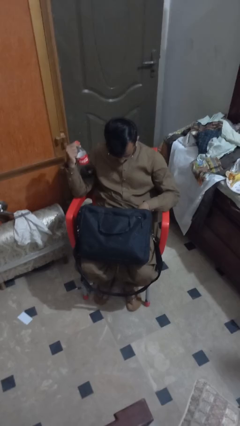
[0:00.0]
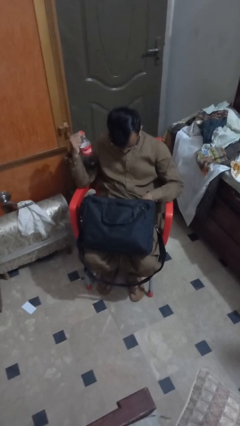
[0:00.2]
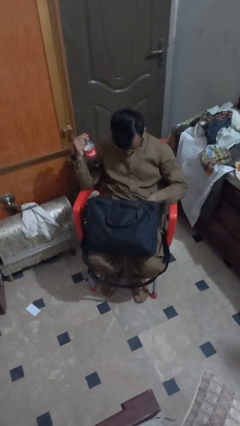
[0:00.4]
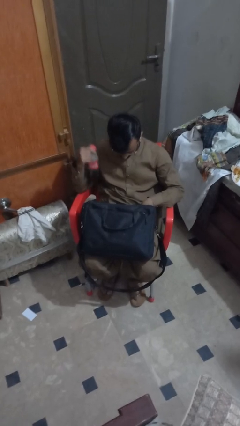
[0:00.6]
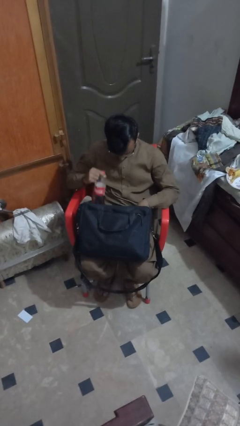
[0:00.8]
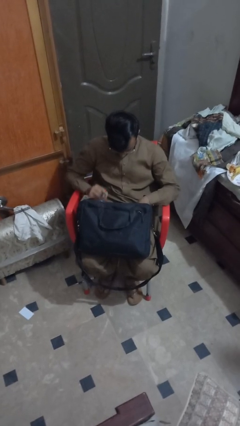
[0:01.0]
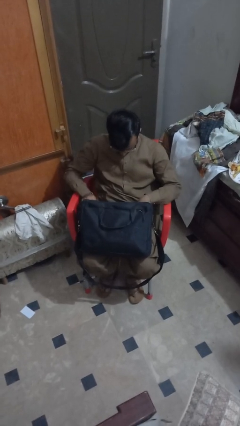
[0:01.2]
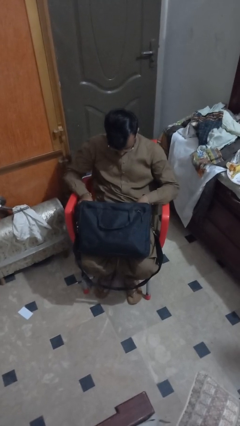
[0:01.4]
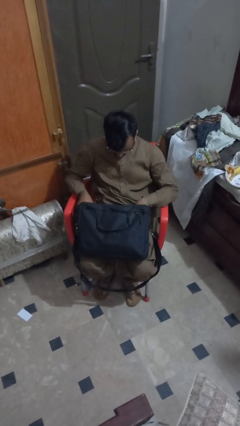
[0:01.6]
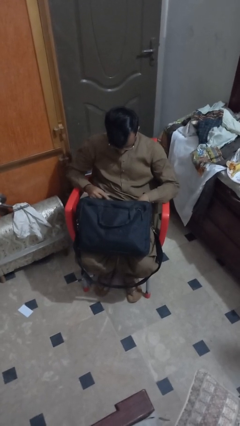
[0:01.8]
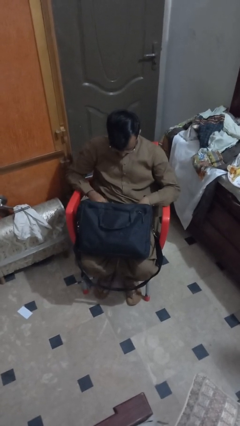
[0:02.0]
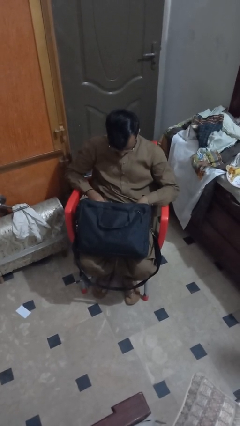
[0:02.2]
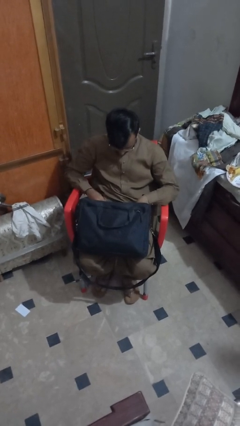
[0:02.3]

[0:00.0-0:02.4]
person puts object into bag

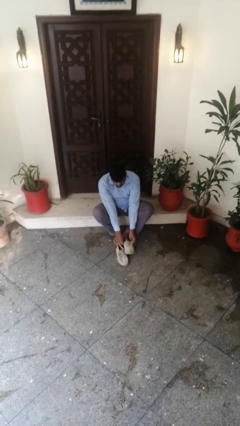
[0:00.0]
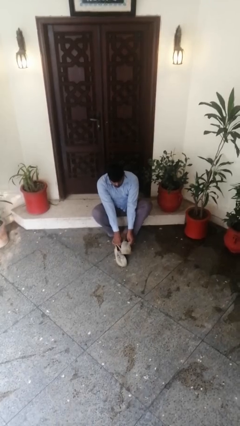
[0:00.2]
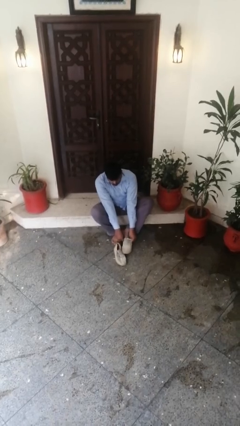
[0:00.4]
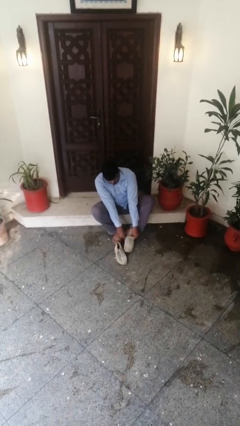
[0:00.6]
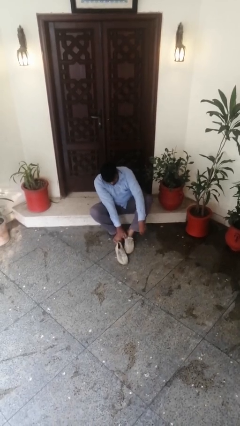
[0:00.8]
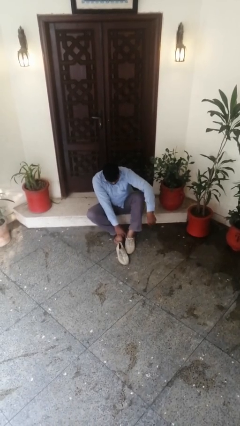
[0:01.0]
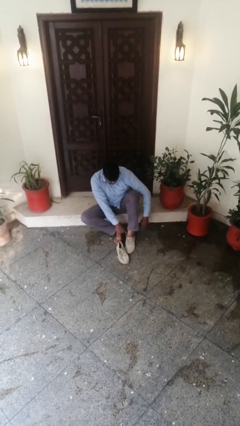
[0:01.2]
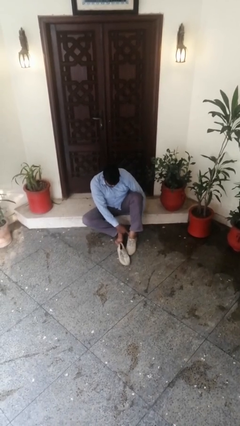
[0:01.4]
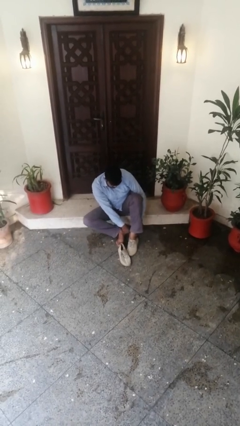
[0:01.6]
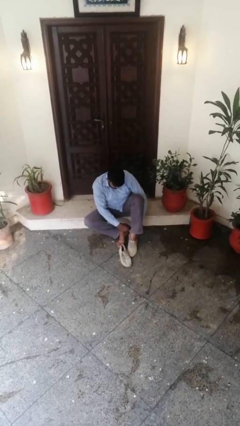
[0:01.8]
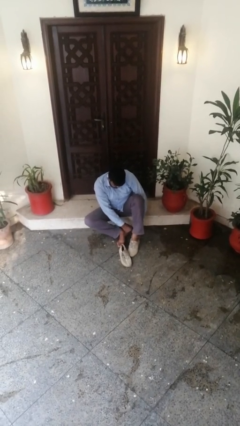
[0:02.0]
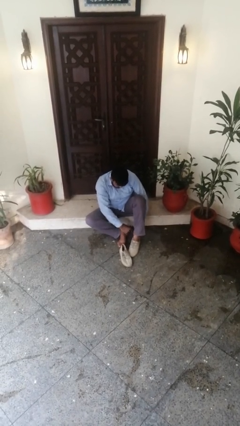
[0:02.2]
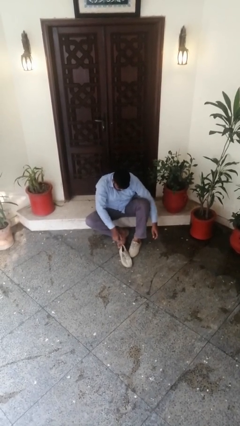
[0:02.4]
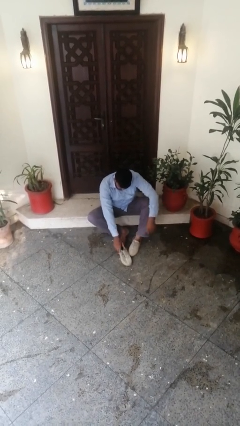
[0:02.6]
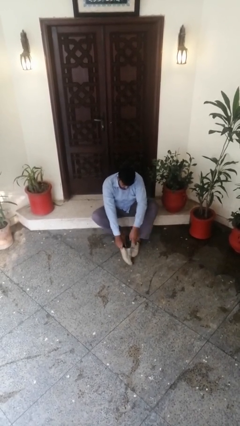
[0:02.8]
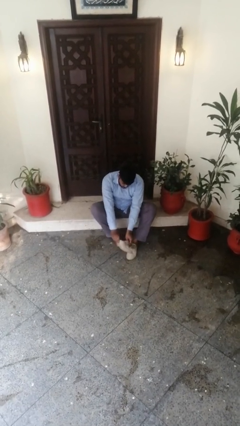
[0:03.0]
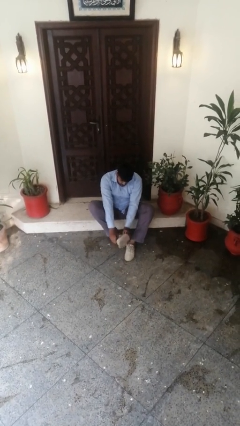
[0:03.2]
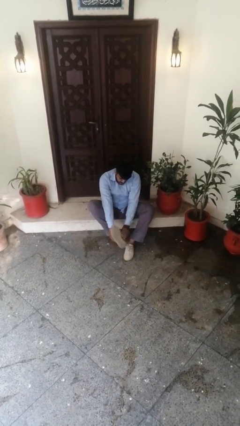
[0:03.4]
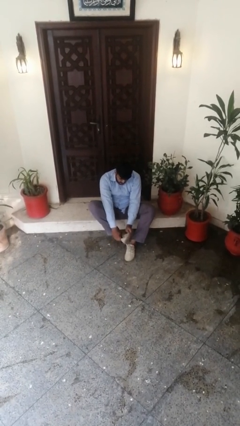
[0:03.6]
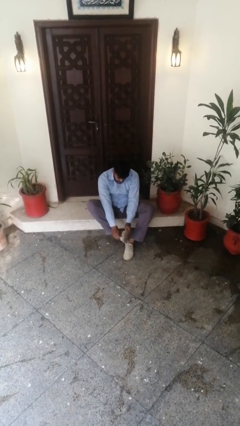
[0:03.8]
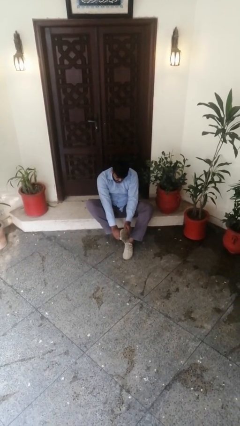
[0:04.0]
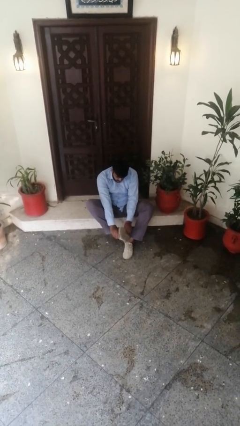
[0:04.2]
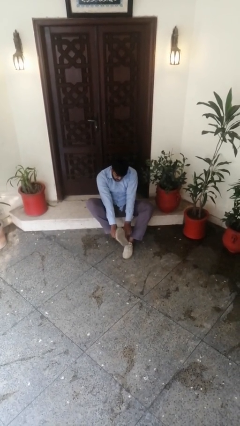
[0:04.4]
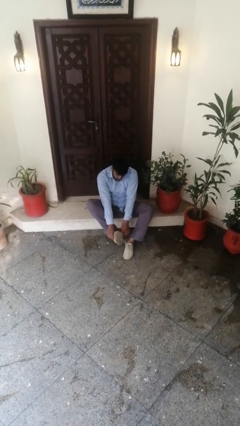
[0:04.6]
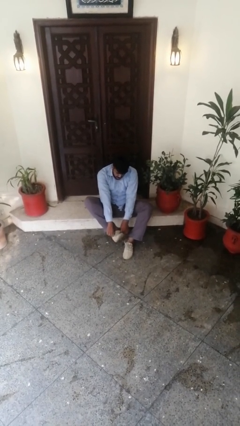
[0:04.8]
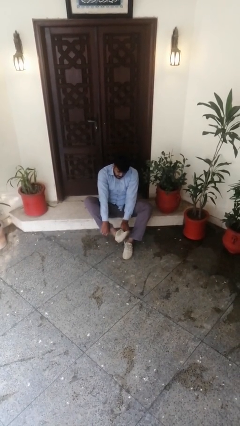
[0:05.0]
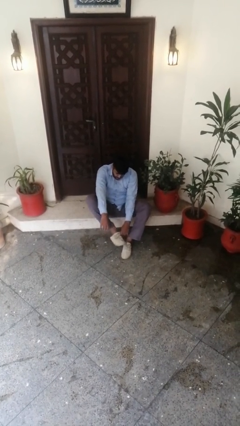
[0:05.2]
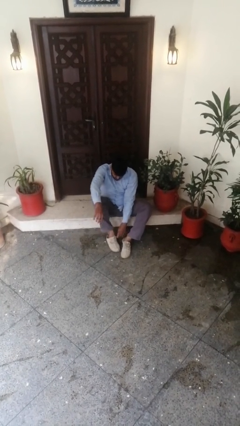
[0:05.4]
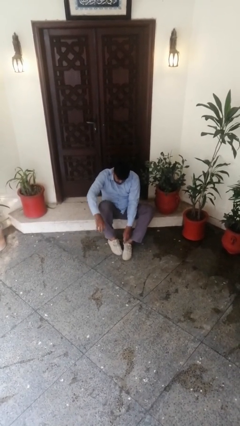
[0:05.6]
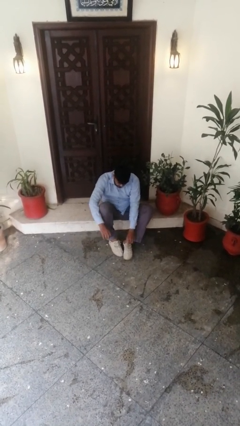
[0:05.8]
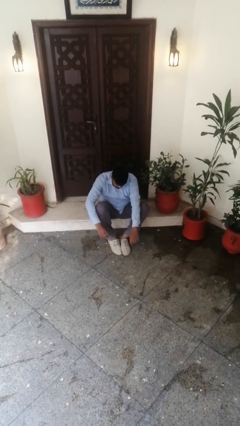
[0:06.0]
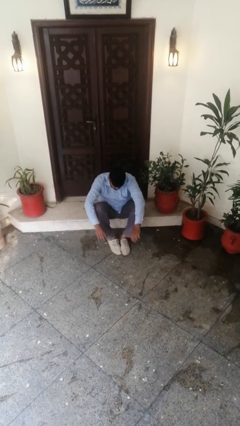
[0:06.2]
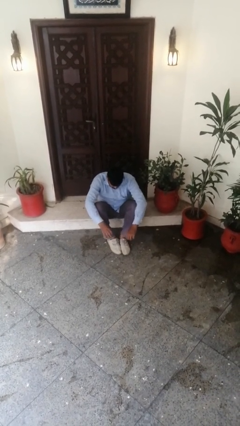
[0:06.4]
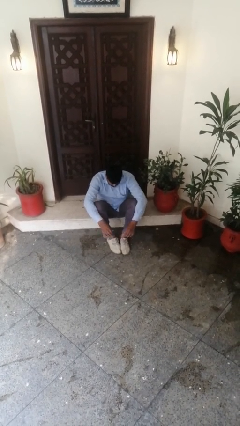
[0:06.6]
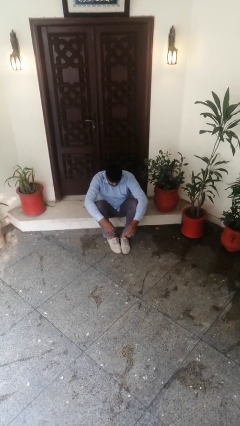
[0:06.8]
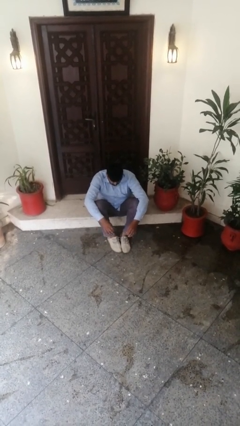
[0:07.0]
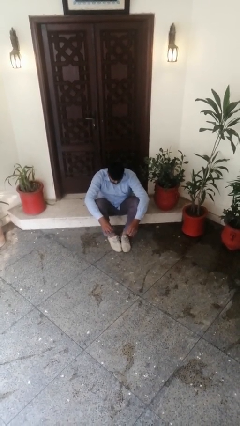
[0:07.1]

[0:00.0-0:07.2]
person puts on shoes

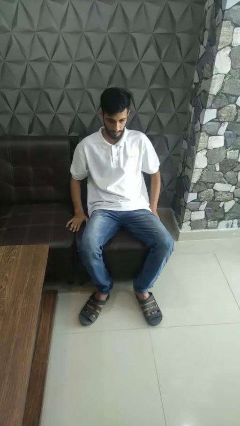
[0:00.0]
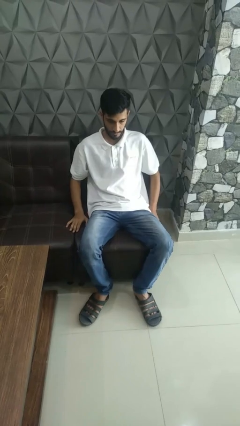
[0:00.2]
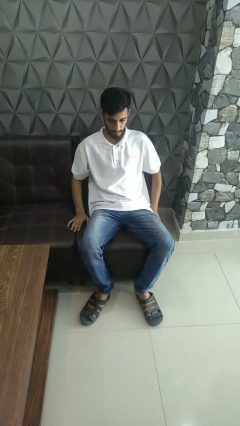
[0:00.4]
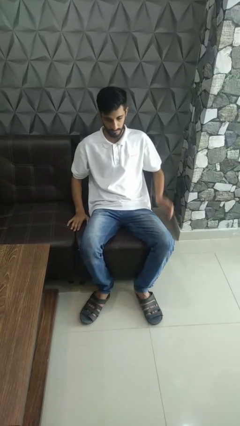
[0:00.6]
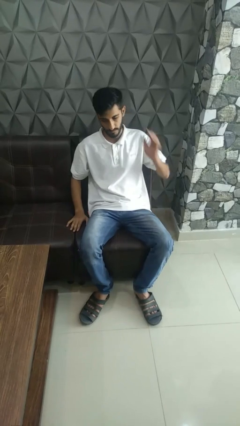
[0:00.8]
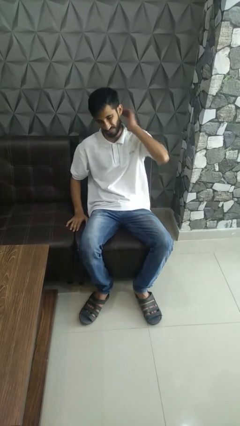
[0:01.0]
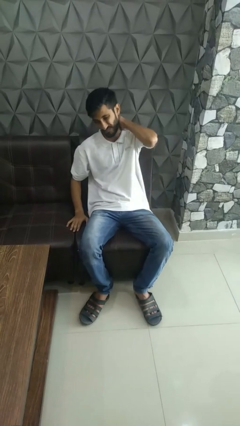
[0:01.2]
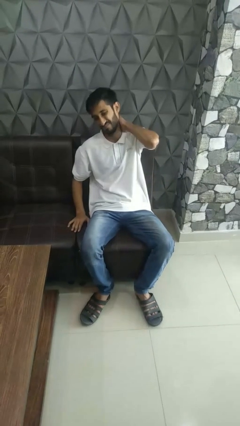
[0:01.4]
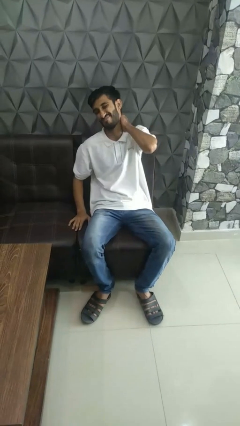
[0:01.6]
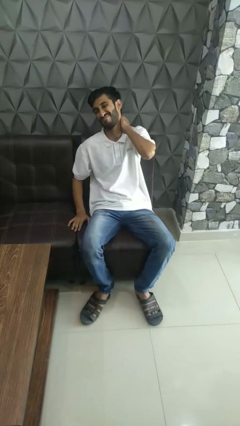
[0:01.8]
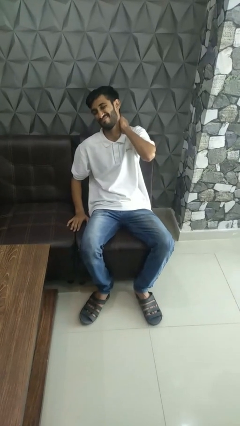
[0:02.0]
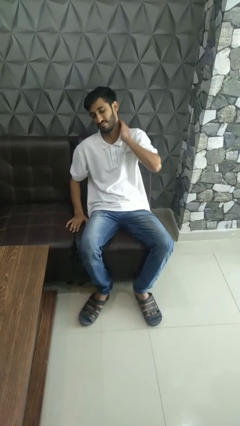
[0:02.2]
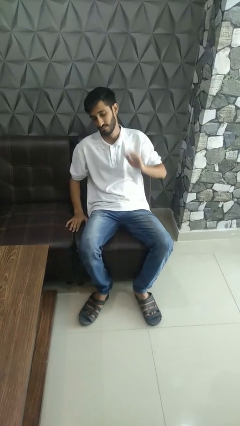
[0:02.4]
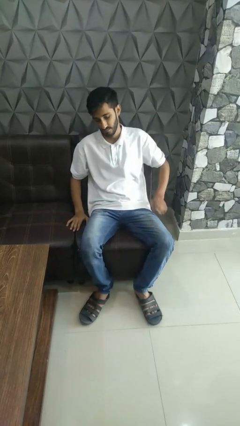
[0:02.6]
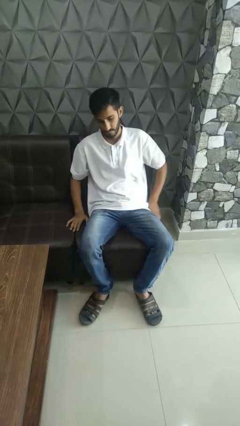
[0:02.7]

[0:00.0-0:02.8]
person rubs neck

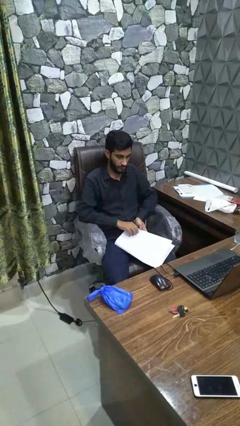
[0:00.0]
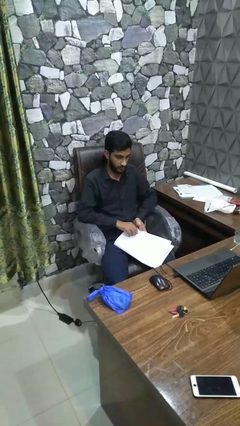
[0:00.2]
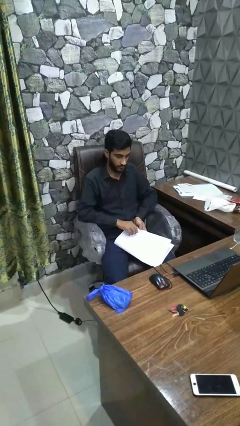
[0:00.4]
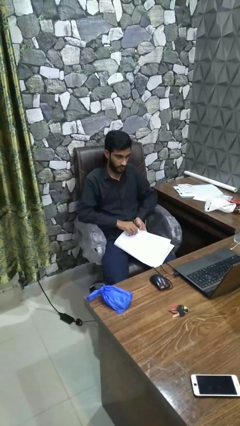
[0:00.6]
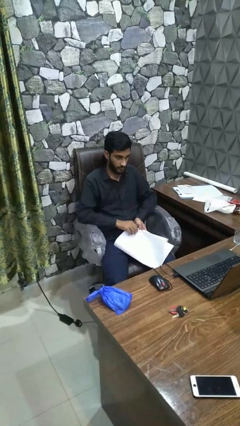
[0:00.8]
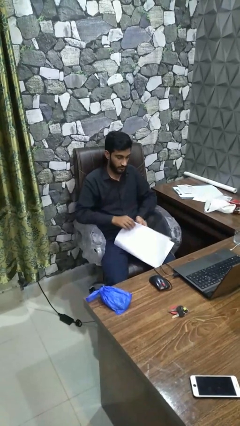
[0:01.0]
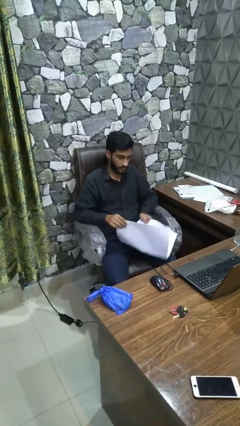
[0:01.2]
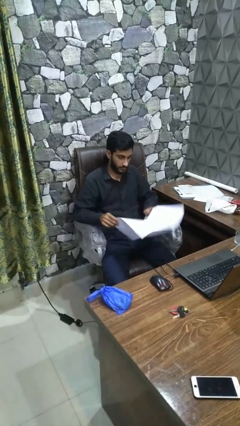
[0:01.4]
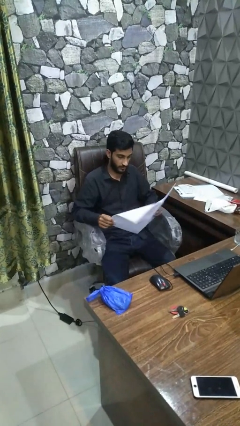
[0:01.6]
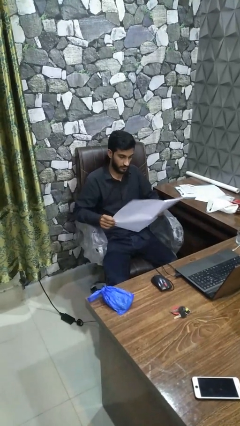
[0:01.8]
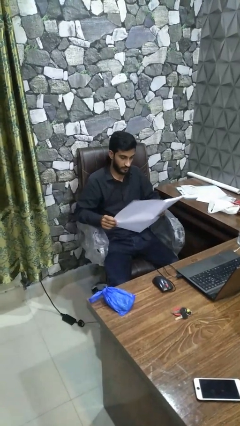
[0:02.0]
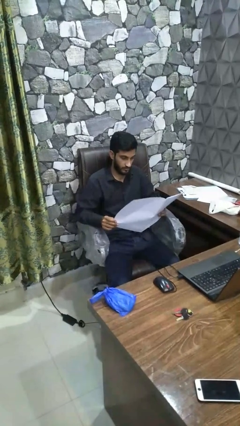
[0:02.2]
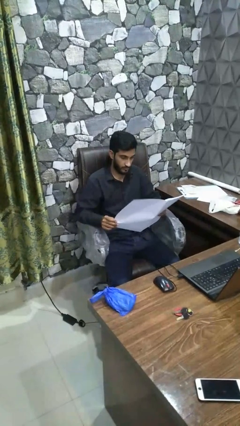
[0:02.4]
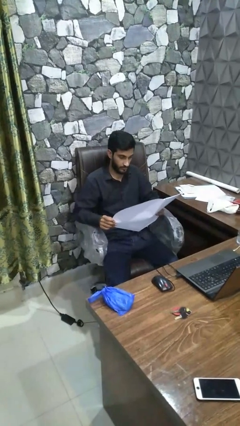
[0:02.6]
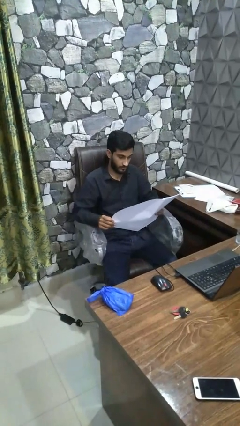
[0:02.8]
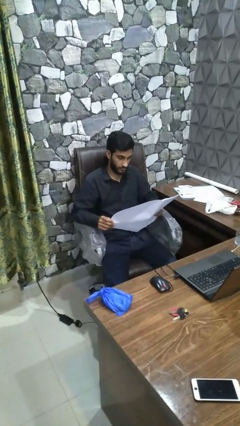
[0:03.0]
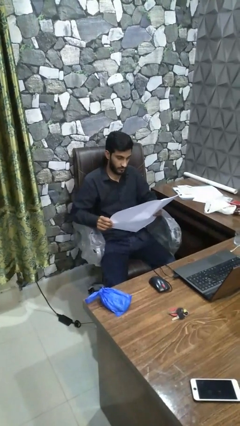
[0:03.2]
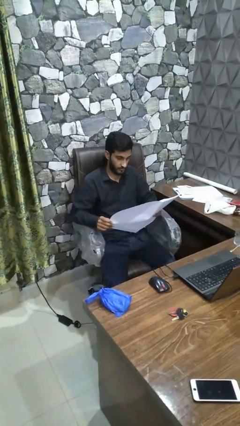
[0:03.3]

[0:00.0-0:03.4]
person reads magazine

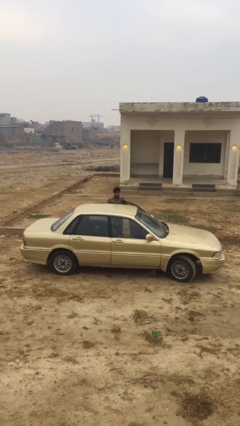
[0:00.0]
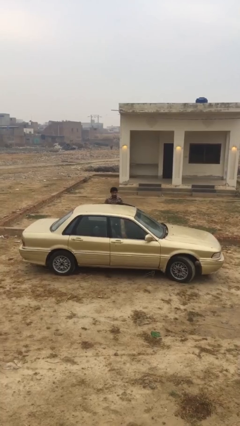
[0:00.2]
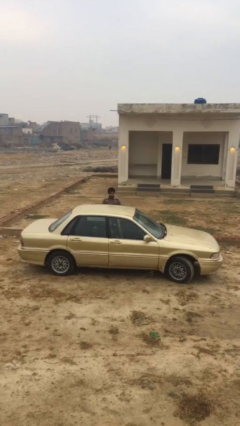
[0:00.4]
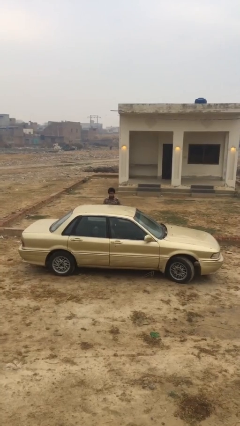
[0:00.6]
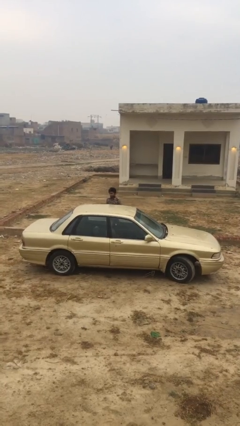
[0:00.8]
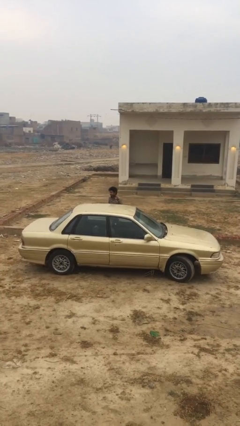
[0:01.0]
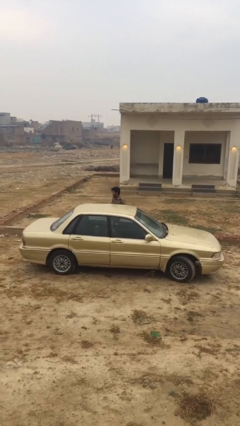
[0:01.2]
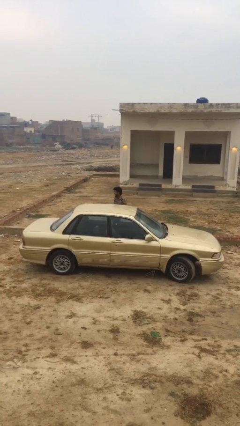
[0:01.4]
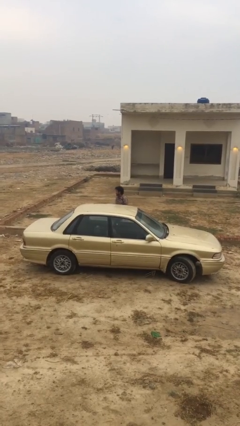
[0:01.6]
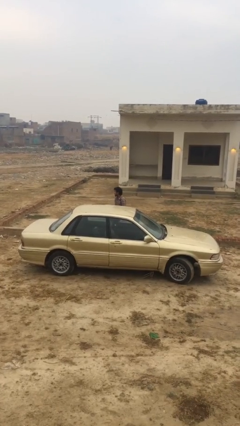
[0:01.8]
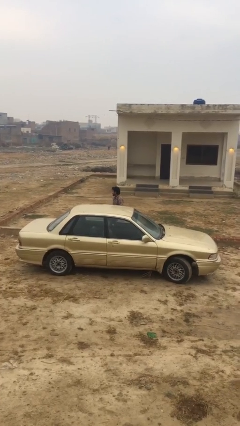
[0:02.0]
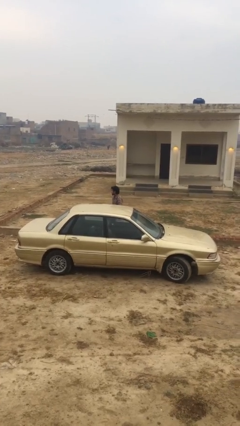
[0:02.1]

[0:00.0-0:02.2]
person closes car door
